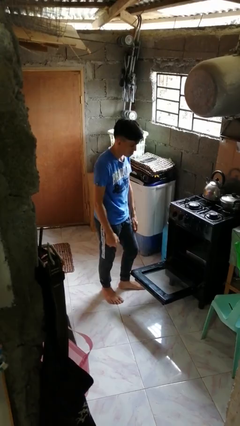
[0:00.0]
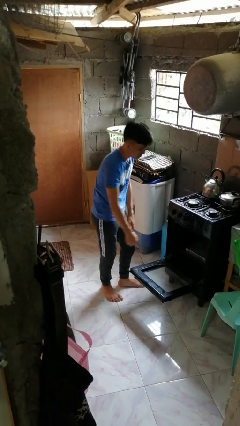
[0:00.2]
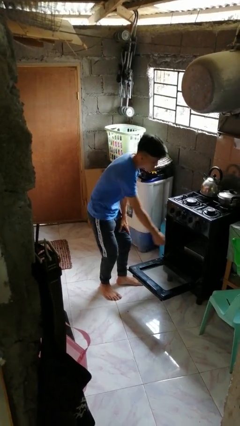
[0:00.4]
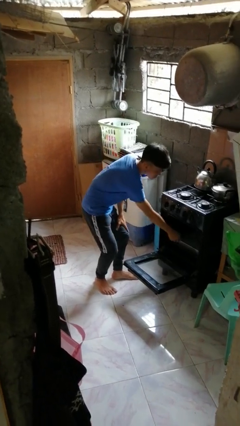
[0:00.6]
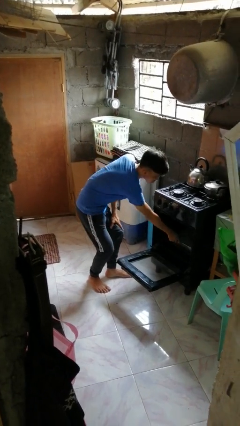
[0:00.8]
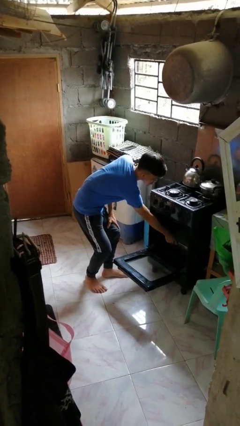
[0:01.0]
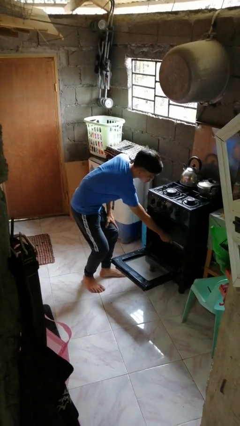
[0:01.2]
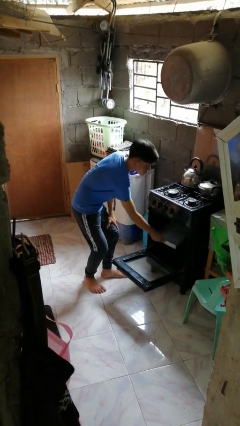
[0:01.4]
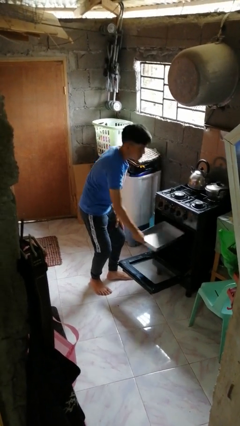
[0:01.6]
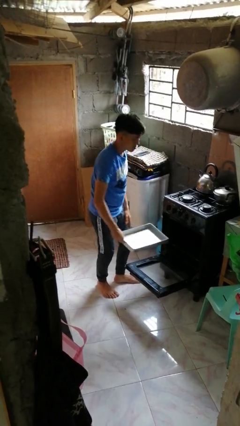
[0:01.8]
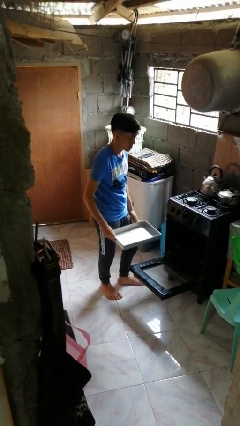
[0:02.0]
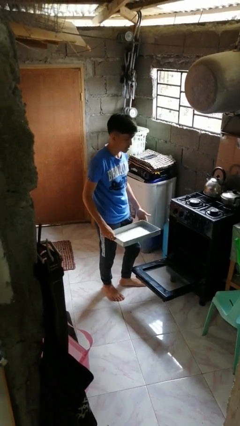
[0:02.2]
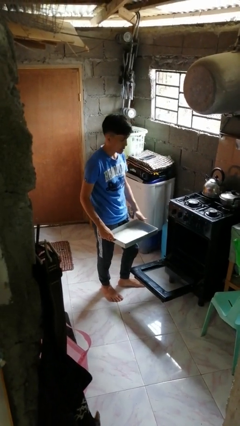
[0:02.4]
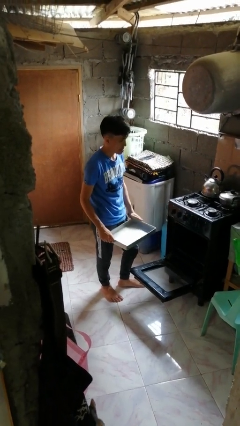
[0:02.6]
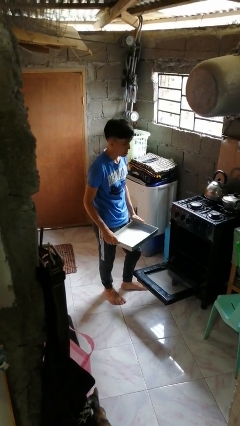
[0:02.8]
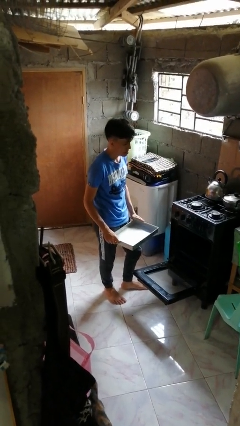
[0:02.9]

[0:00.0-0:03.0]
person takes object from oven

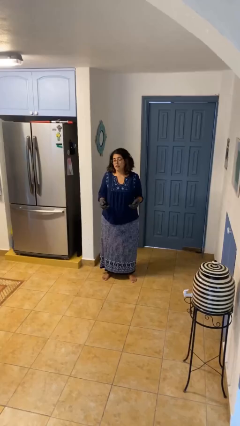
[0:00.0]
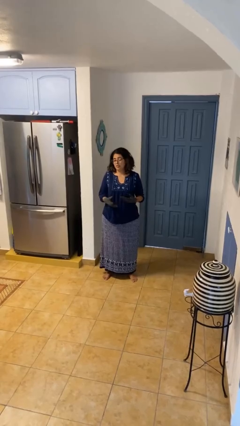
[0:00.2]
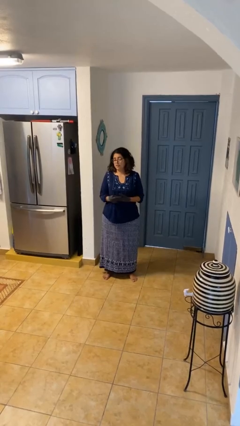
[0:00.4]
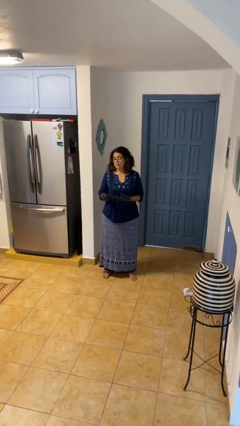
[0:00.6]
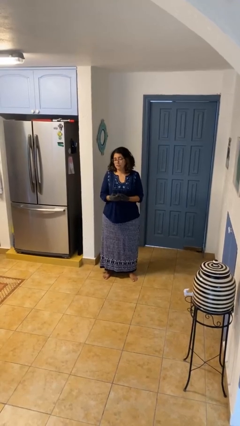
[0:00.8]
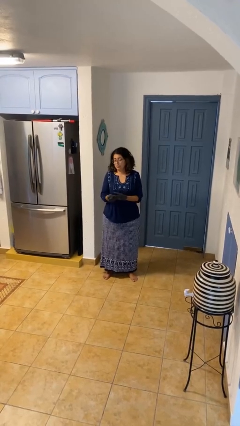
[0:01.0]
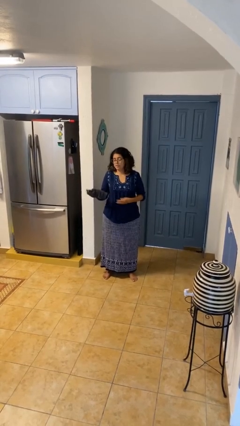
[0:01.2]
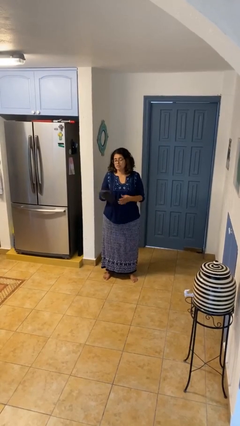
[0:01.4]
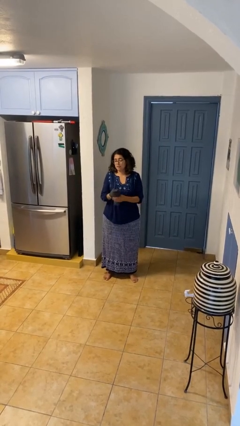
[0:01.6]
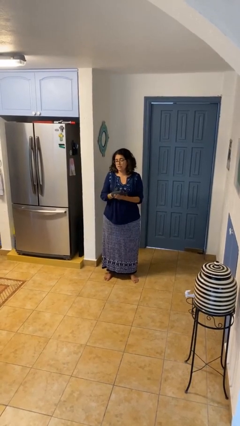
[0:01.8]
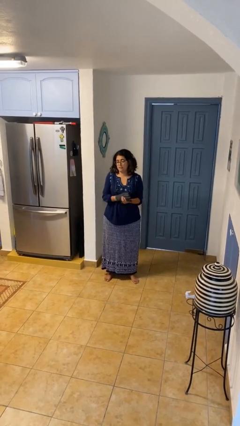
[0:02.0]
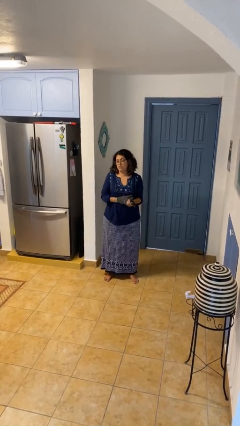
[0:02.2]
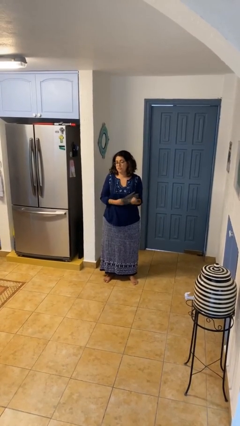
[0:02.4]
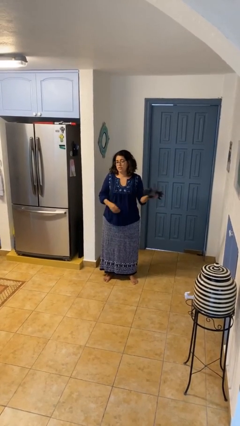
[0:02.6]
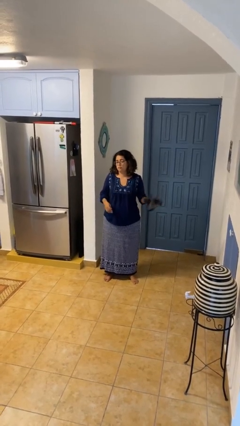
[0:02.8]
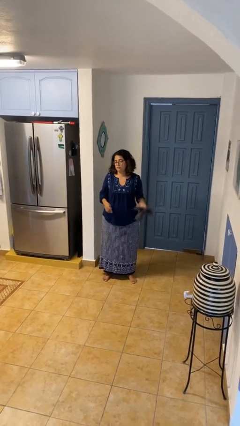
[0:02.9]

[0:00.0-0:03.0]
person takes off gloves

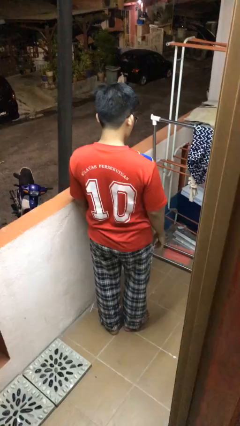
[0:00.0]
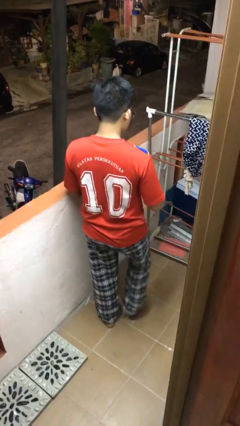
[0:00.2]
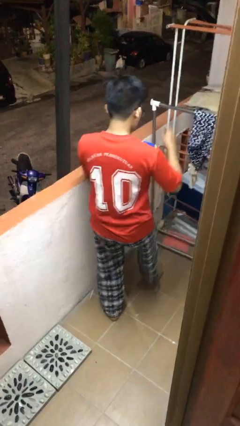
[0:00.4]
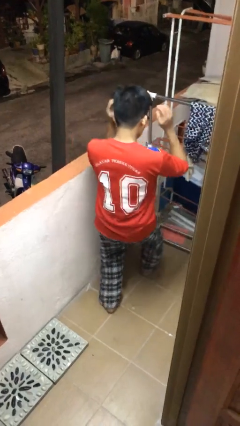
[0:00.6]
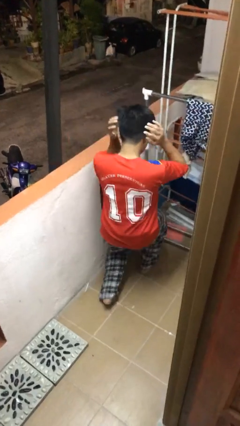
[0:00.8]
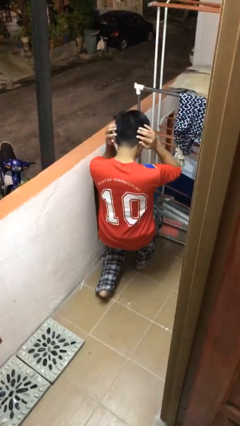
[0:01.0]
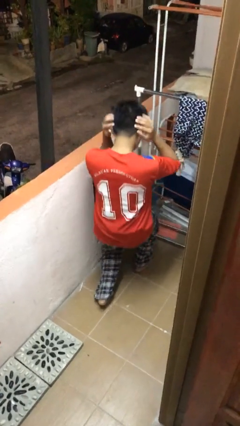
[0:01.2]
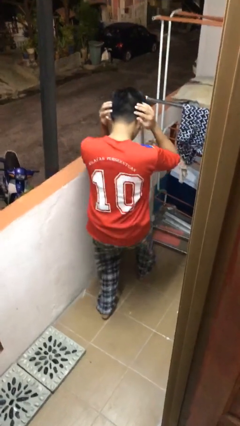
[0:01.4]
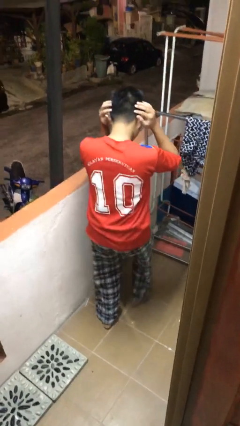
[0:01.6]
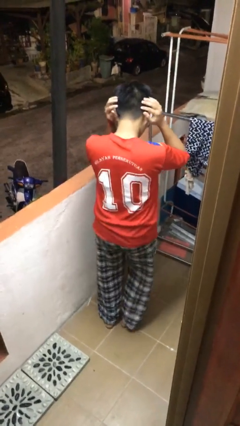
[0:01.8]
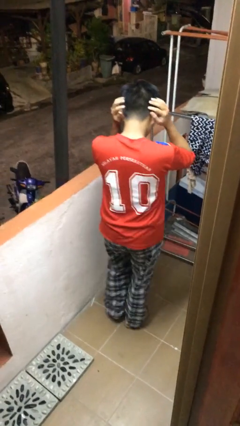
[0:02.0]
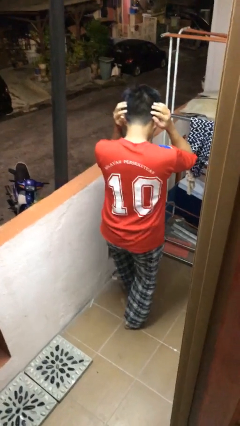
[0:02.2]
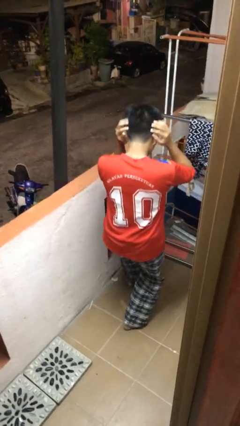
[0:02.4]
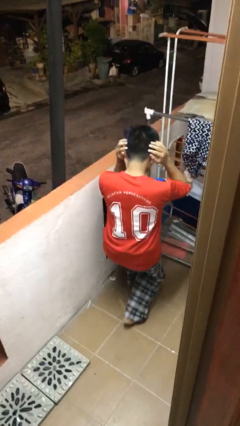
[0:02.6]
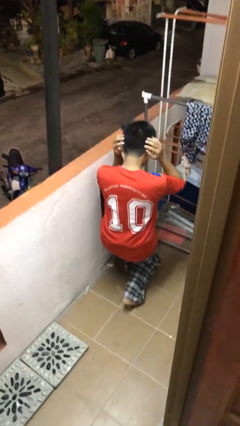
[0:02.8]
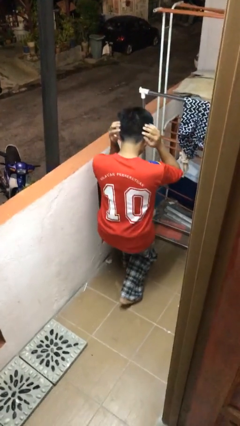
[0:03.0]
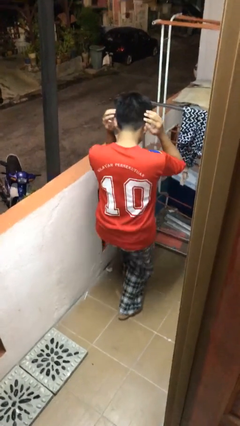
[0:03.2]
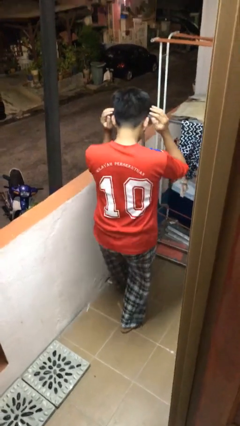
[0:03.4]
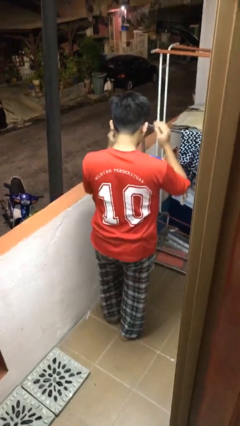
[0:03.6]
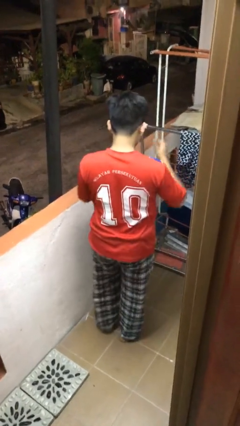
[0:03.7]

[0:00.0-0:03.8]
person exercises with lunges

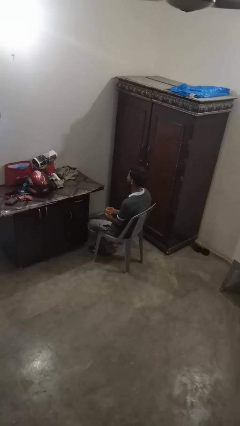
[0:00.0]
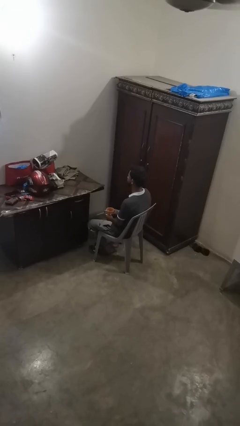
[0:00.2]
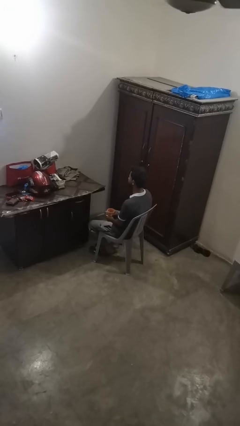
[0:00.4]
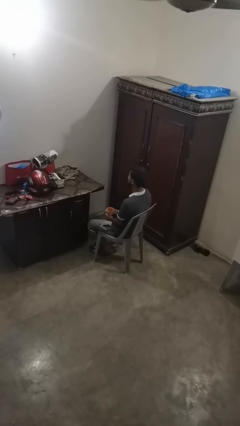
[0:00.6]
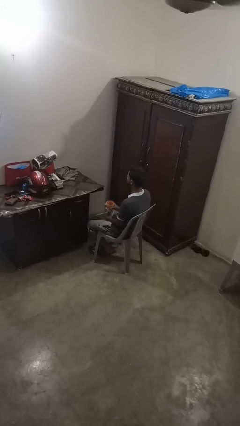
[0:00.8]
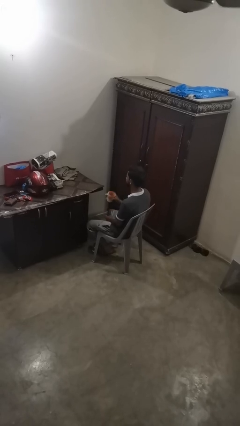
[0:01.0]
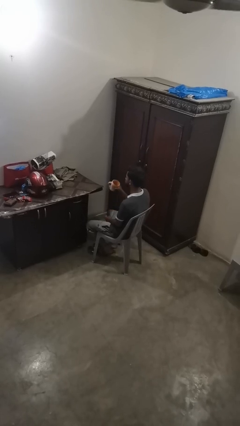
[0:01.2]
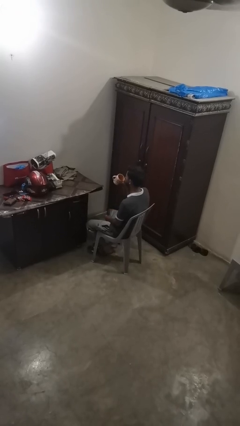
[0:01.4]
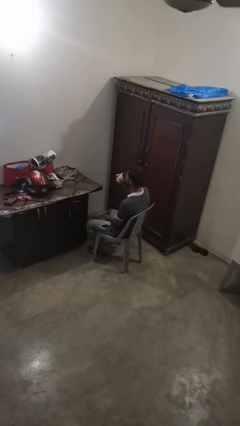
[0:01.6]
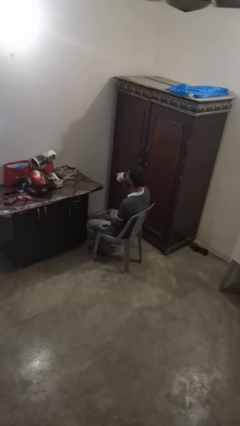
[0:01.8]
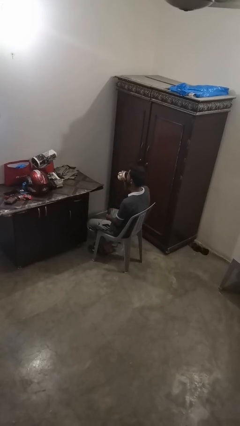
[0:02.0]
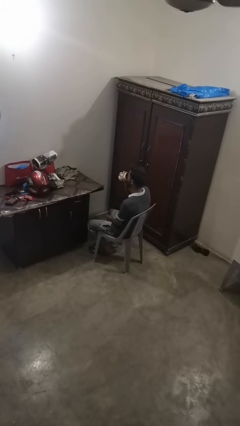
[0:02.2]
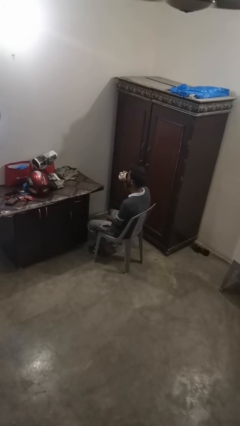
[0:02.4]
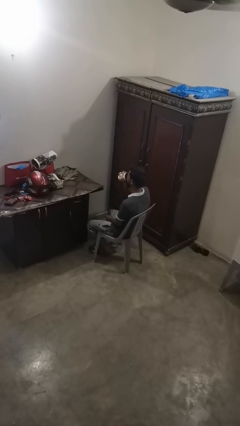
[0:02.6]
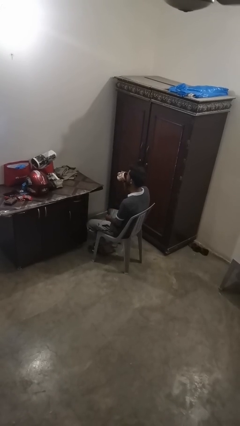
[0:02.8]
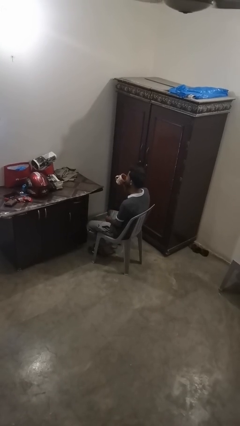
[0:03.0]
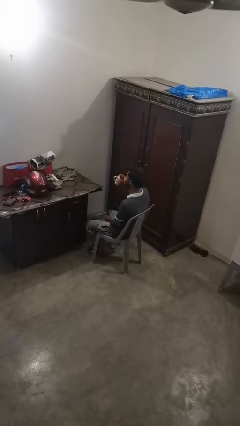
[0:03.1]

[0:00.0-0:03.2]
person drinks from mug

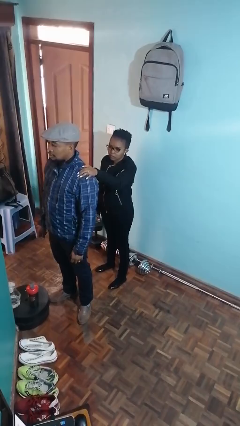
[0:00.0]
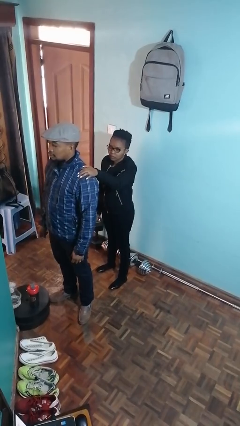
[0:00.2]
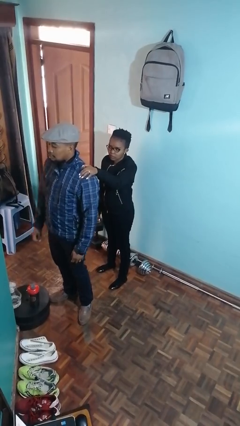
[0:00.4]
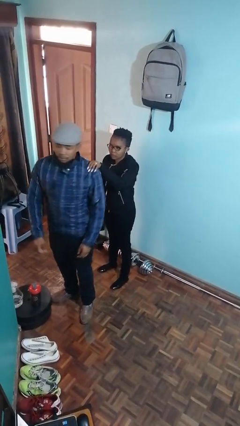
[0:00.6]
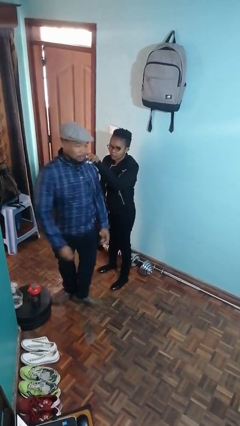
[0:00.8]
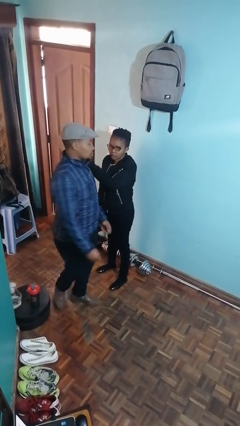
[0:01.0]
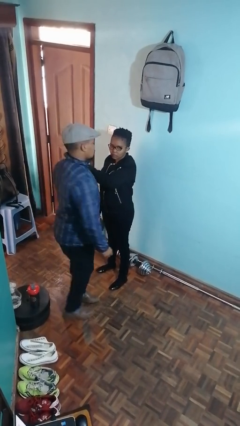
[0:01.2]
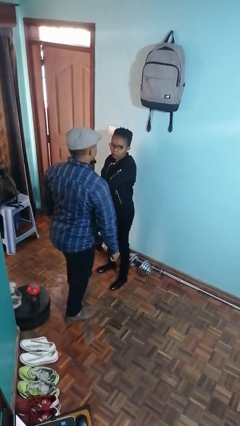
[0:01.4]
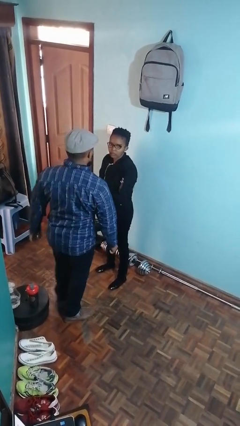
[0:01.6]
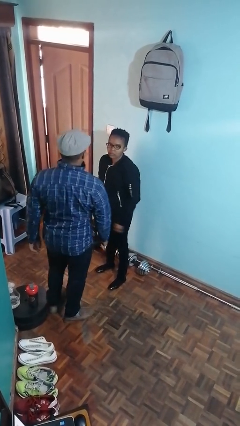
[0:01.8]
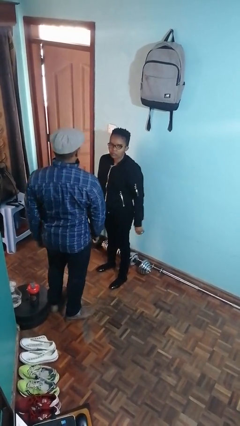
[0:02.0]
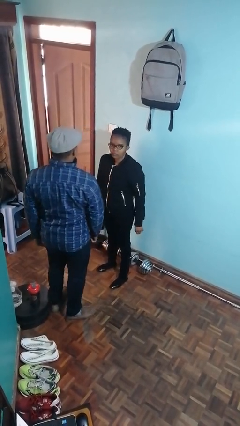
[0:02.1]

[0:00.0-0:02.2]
person spins person around

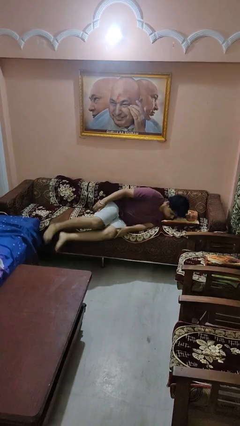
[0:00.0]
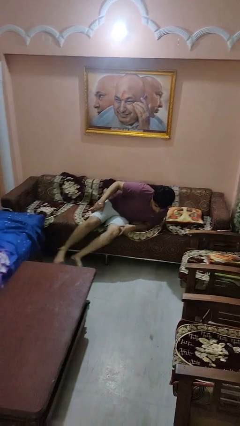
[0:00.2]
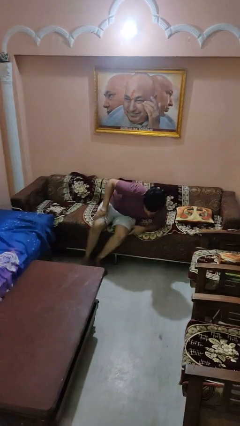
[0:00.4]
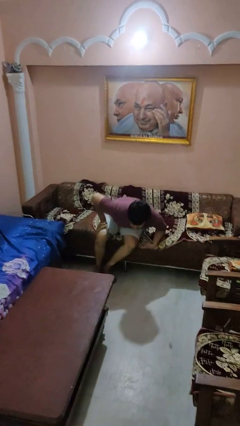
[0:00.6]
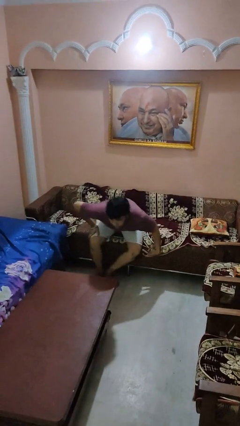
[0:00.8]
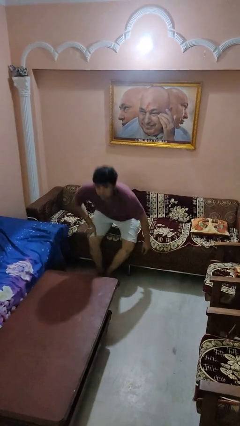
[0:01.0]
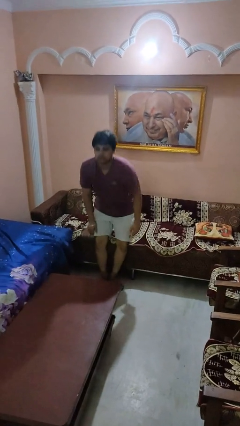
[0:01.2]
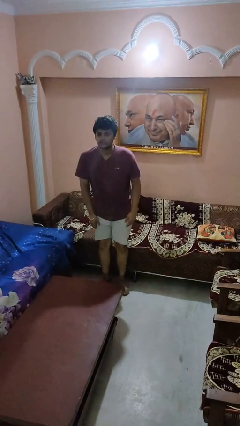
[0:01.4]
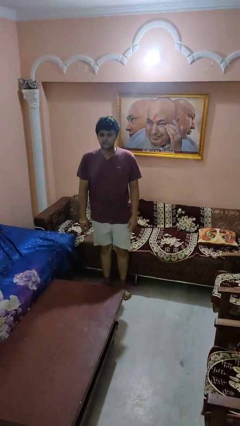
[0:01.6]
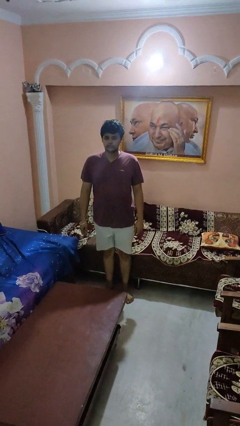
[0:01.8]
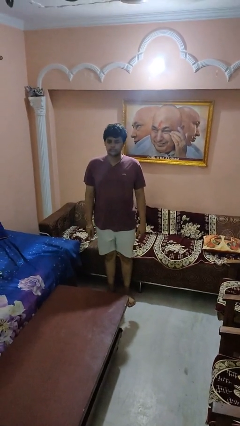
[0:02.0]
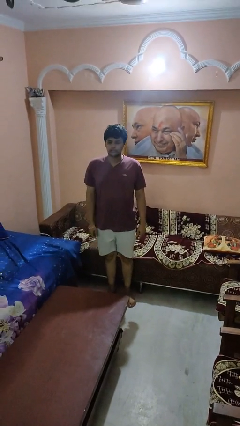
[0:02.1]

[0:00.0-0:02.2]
person stands up
